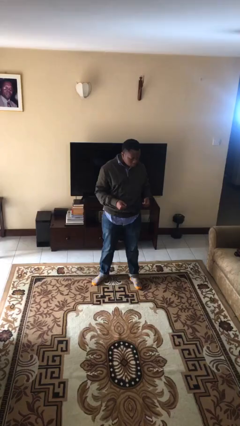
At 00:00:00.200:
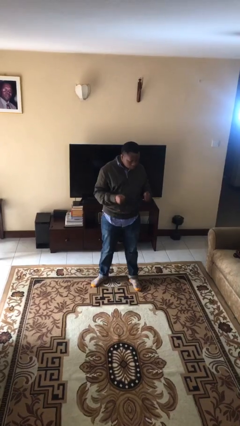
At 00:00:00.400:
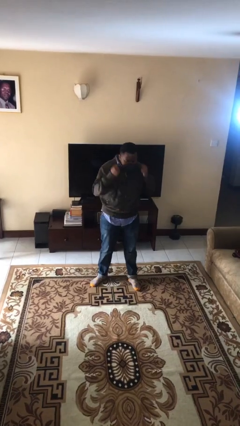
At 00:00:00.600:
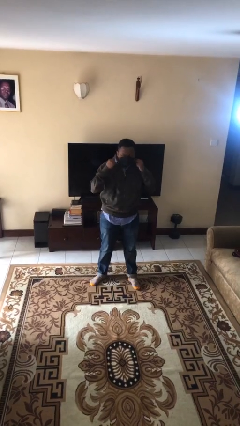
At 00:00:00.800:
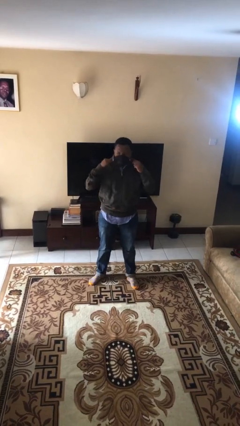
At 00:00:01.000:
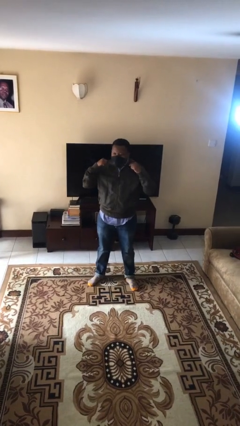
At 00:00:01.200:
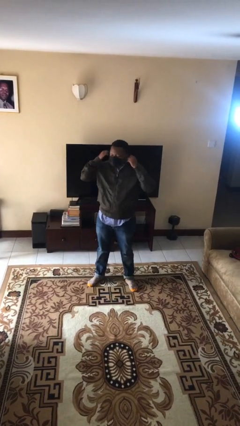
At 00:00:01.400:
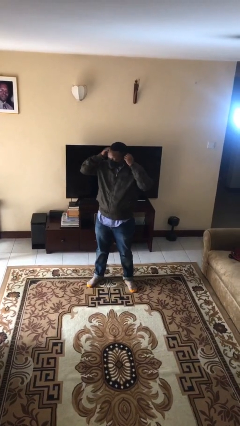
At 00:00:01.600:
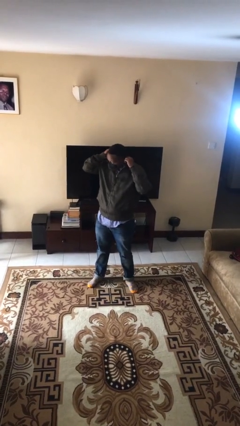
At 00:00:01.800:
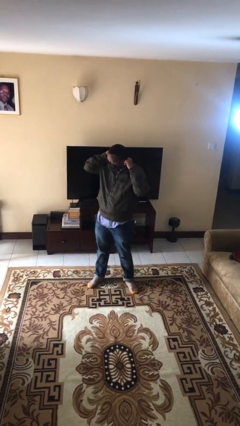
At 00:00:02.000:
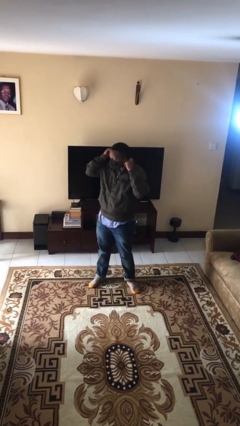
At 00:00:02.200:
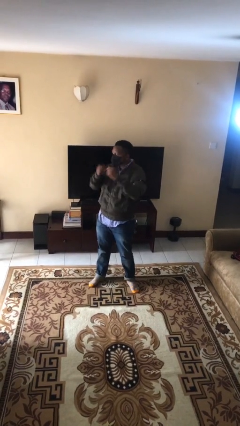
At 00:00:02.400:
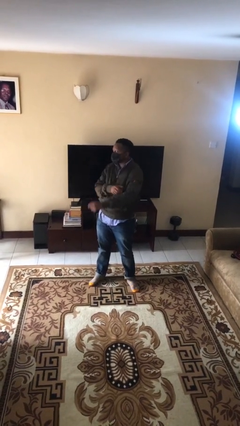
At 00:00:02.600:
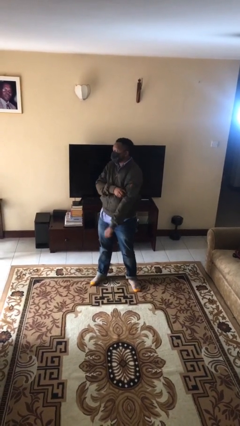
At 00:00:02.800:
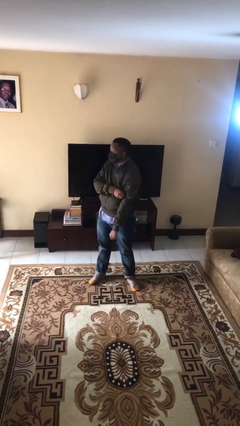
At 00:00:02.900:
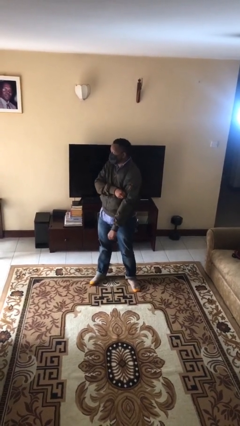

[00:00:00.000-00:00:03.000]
person puts on facemask

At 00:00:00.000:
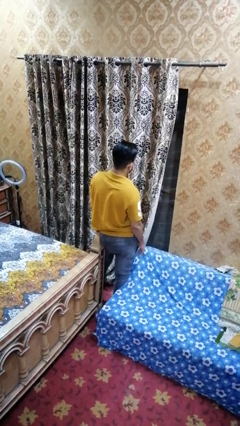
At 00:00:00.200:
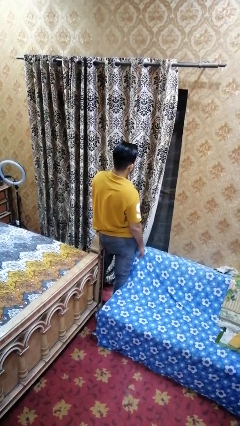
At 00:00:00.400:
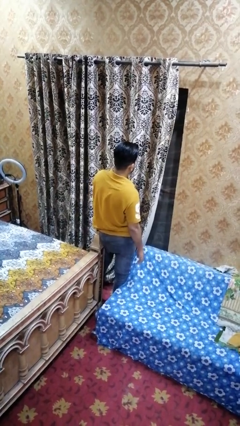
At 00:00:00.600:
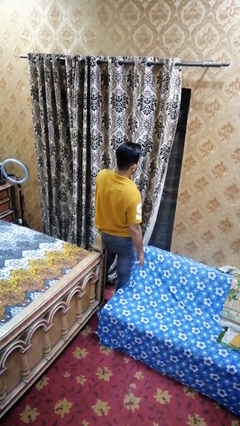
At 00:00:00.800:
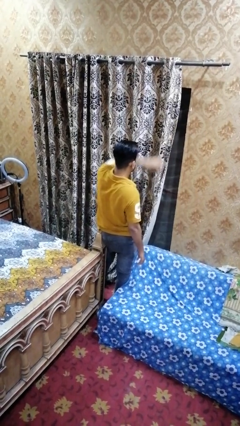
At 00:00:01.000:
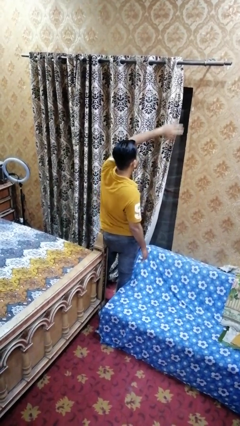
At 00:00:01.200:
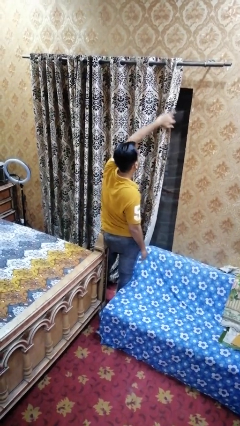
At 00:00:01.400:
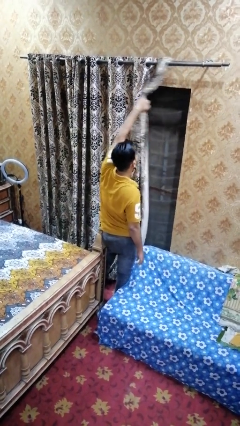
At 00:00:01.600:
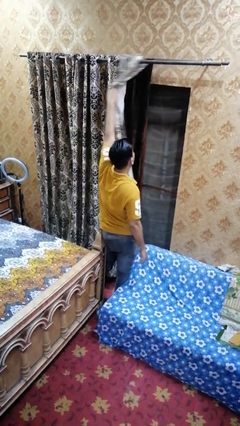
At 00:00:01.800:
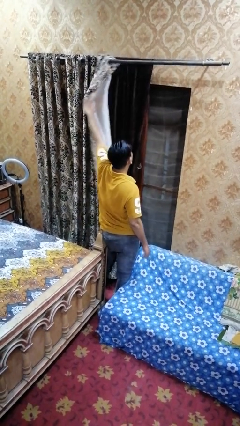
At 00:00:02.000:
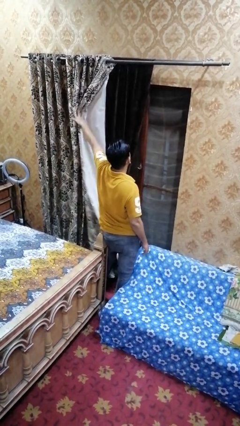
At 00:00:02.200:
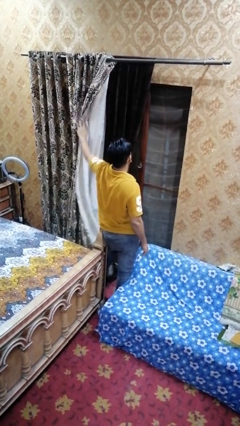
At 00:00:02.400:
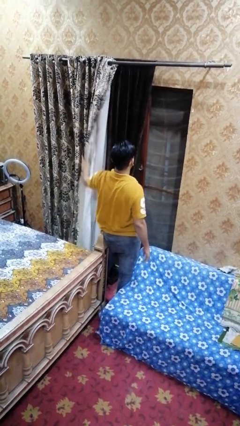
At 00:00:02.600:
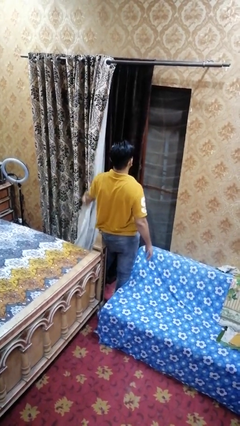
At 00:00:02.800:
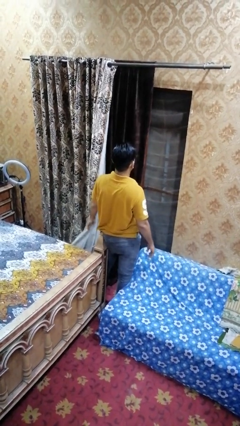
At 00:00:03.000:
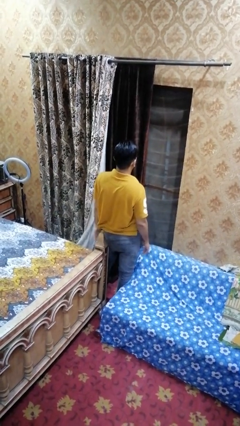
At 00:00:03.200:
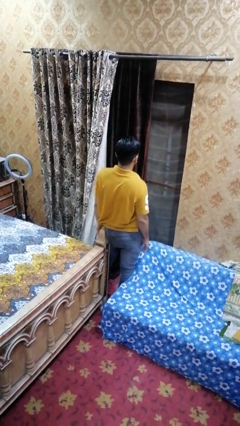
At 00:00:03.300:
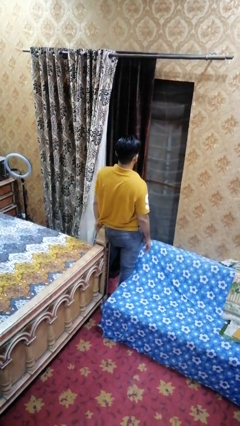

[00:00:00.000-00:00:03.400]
person opens curtains

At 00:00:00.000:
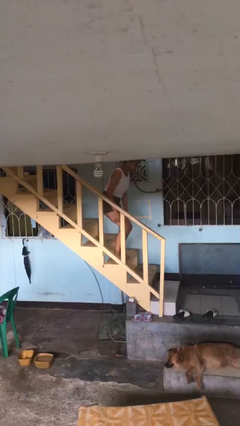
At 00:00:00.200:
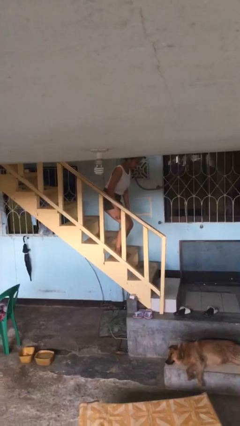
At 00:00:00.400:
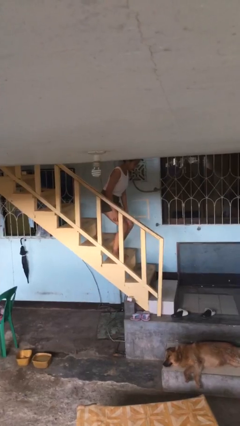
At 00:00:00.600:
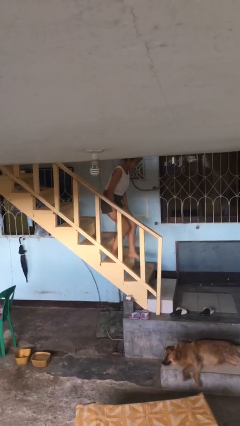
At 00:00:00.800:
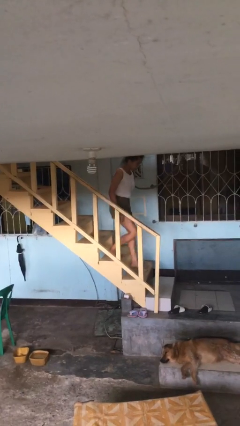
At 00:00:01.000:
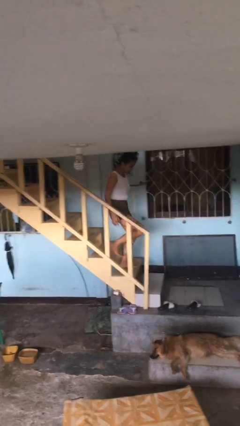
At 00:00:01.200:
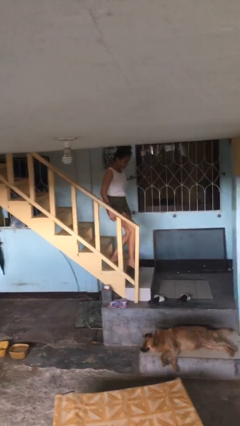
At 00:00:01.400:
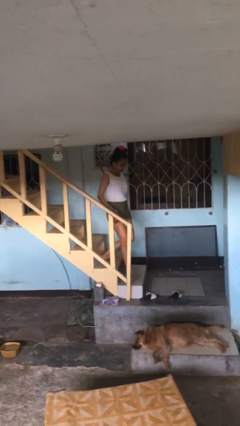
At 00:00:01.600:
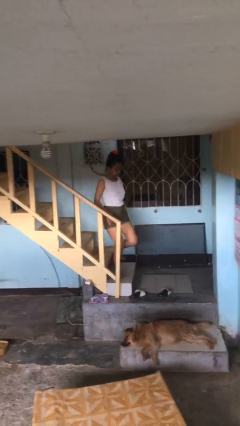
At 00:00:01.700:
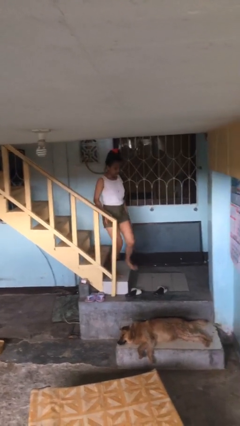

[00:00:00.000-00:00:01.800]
person climbs down stairs

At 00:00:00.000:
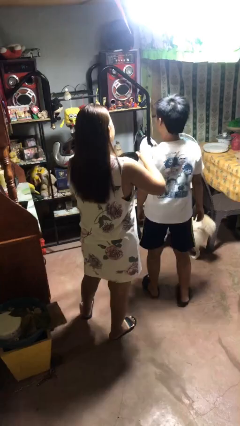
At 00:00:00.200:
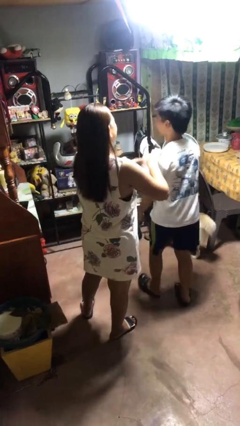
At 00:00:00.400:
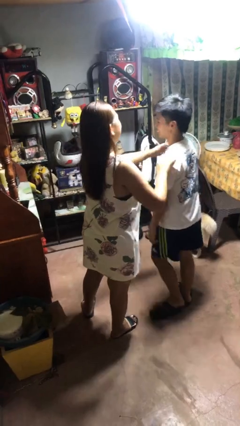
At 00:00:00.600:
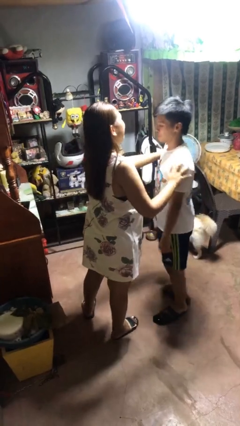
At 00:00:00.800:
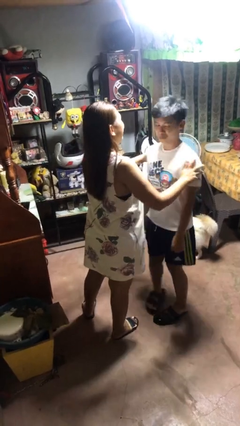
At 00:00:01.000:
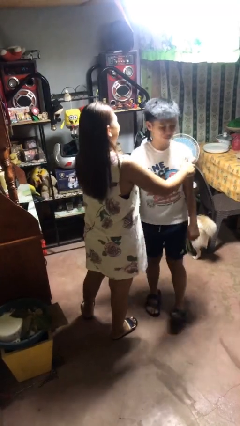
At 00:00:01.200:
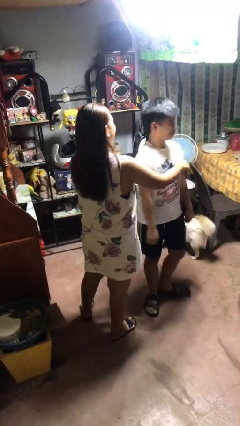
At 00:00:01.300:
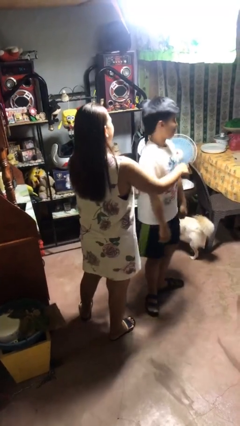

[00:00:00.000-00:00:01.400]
person spins person around

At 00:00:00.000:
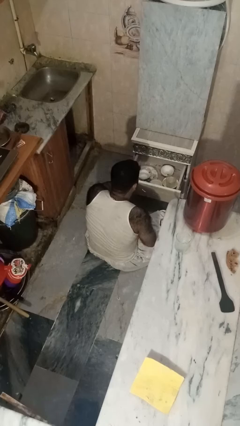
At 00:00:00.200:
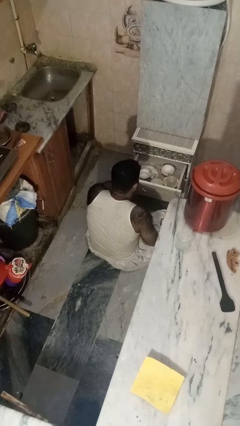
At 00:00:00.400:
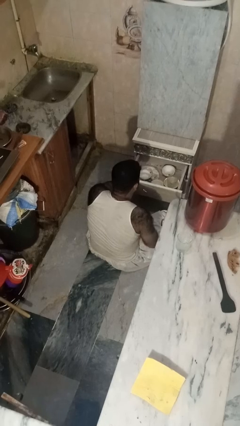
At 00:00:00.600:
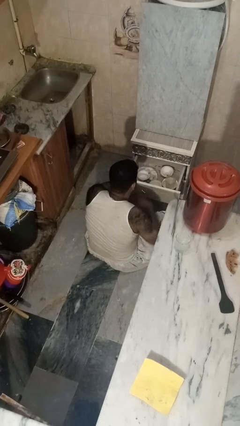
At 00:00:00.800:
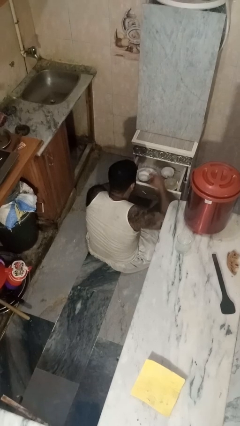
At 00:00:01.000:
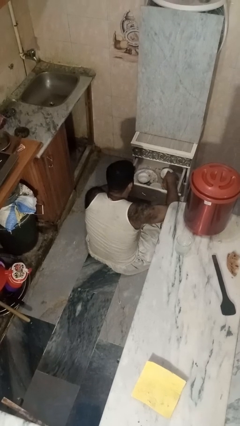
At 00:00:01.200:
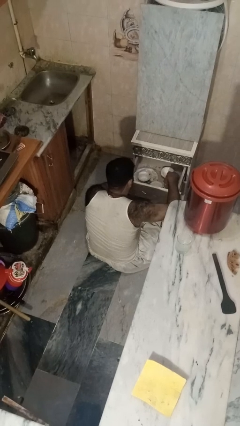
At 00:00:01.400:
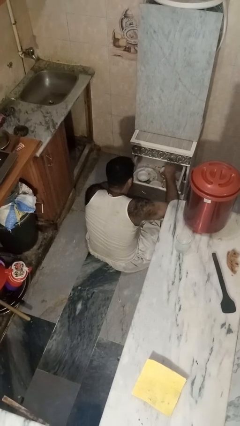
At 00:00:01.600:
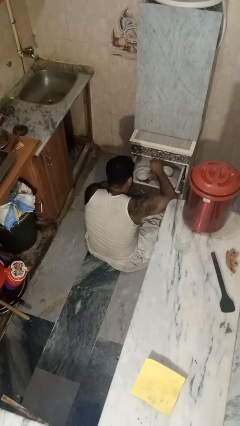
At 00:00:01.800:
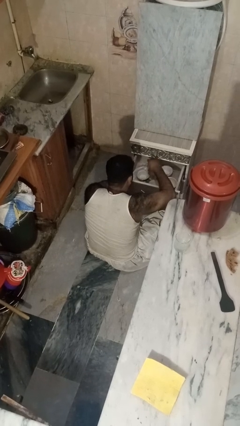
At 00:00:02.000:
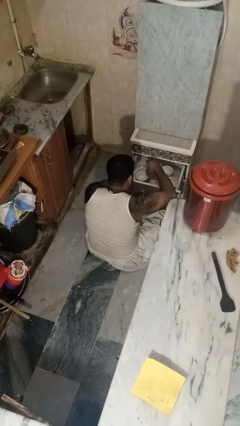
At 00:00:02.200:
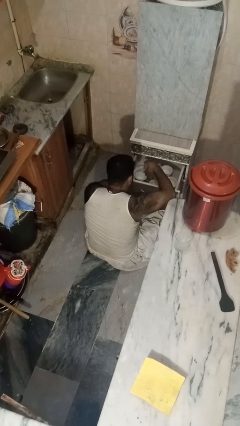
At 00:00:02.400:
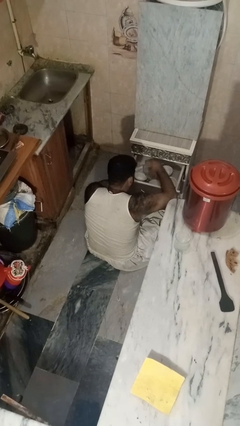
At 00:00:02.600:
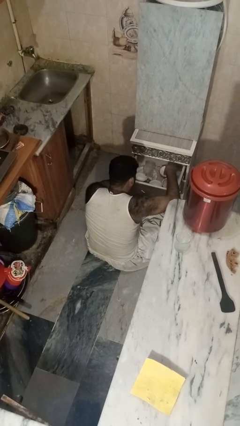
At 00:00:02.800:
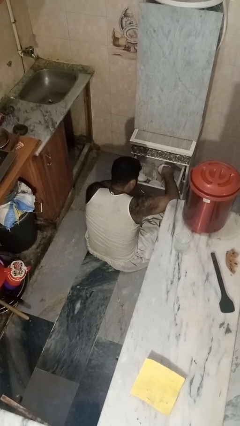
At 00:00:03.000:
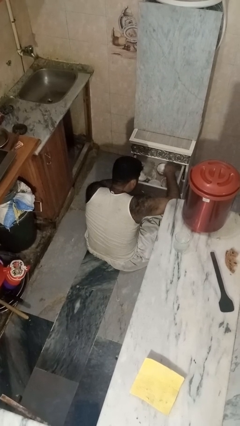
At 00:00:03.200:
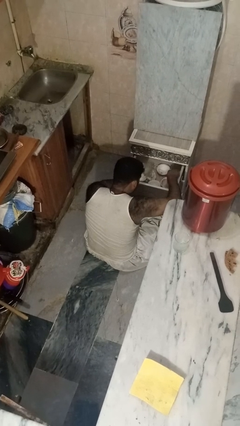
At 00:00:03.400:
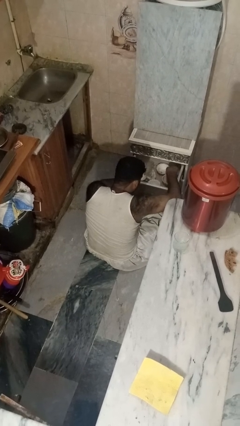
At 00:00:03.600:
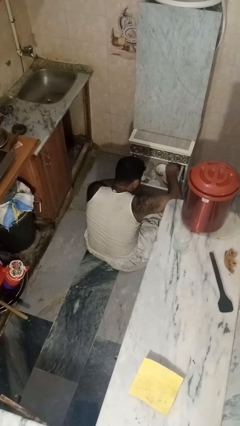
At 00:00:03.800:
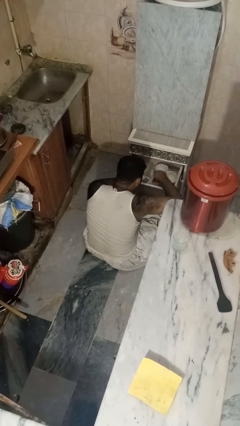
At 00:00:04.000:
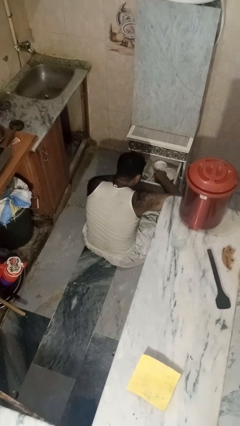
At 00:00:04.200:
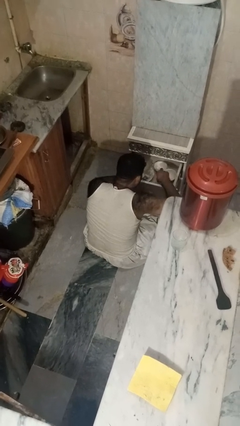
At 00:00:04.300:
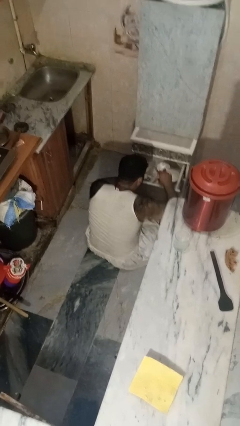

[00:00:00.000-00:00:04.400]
person searches in kitchen drawer

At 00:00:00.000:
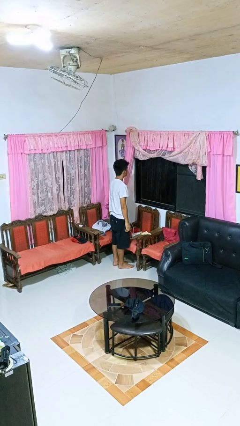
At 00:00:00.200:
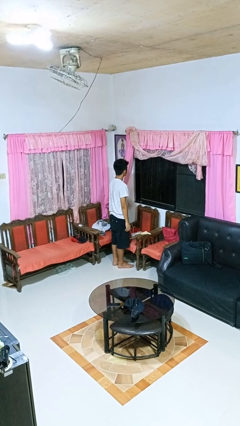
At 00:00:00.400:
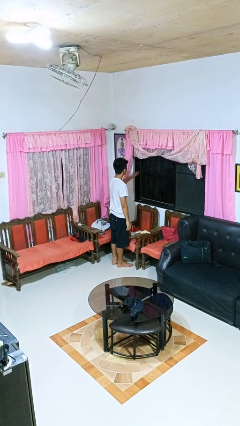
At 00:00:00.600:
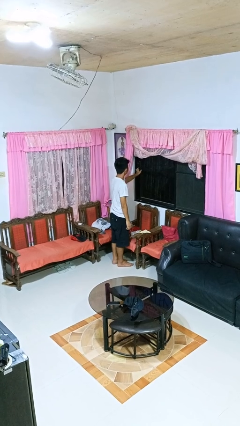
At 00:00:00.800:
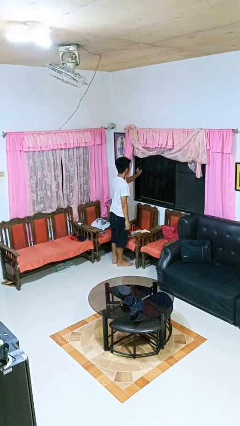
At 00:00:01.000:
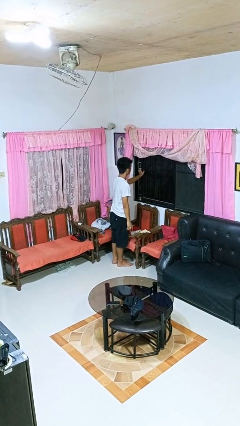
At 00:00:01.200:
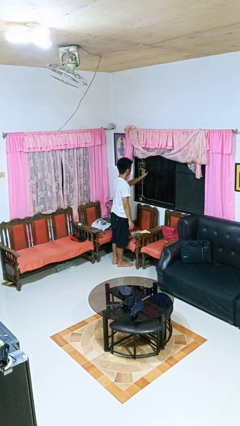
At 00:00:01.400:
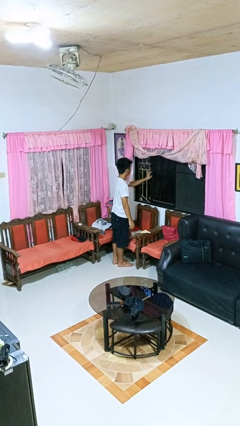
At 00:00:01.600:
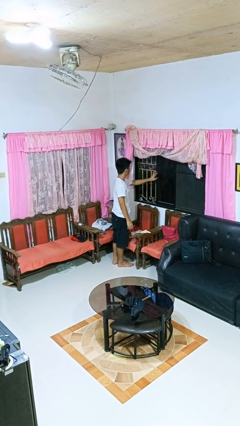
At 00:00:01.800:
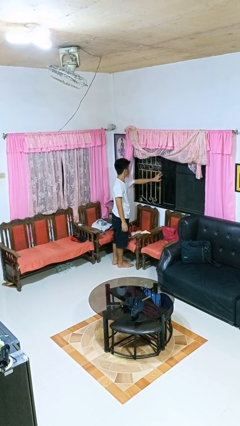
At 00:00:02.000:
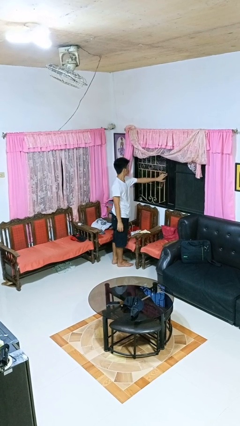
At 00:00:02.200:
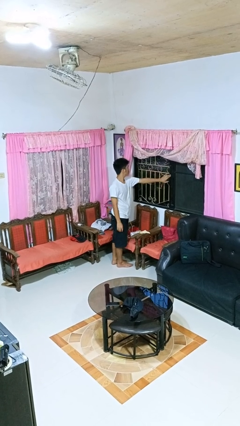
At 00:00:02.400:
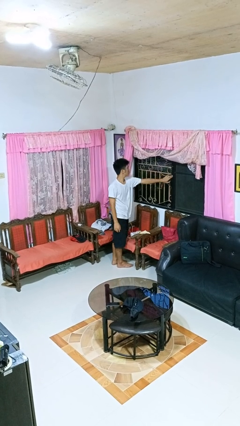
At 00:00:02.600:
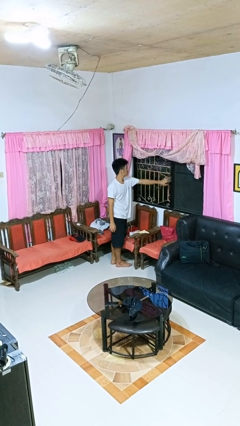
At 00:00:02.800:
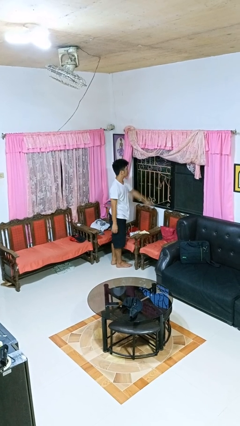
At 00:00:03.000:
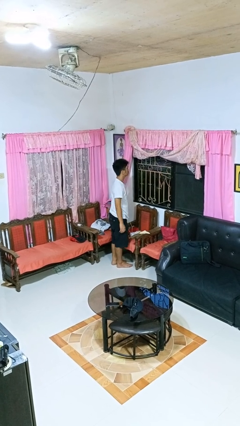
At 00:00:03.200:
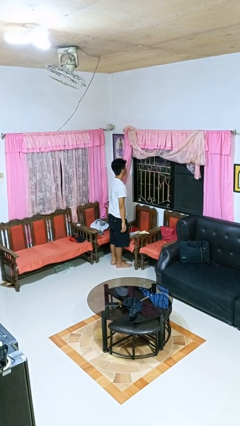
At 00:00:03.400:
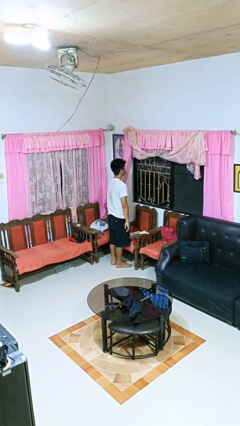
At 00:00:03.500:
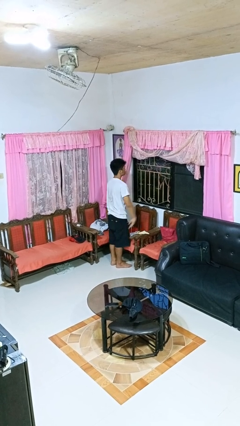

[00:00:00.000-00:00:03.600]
person opens home window
